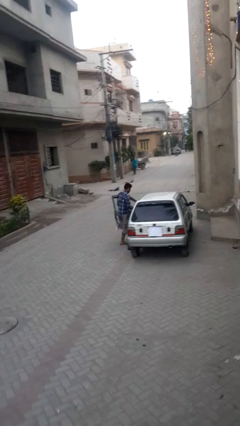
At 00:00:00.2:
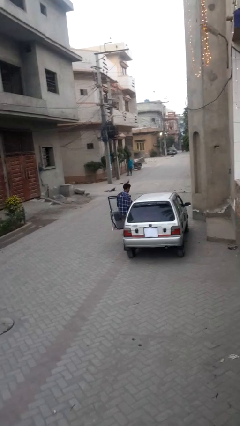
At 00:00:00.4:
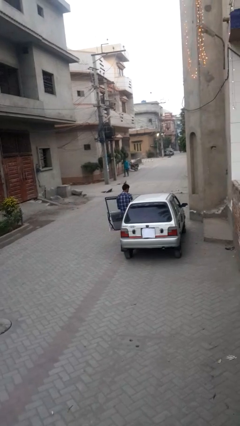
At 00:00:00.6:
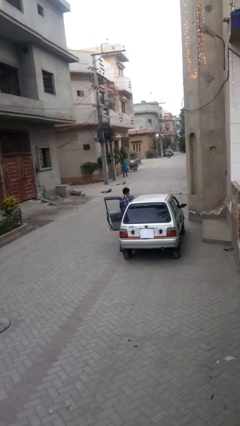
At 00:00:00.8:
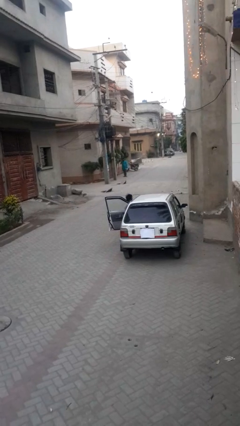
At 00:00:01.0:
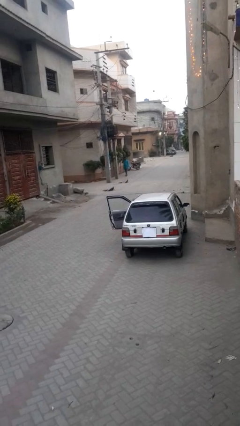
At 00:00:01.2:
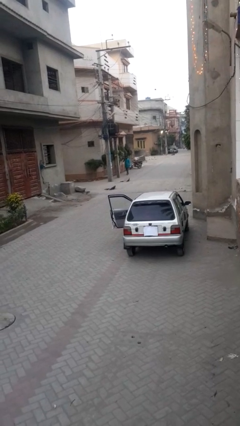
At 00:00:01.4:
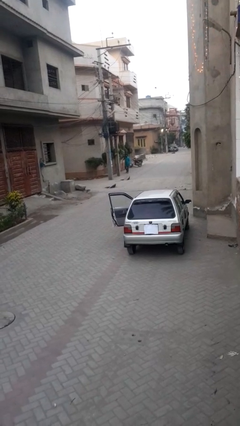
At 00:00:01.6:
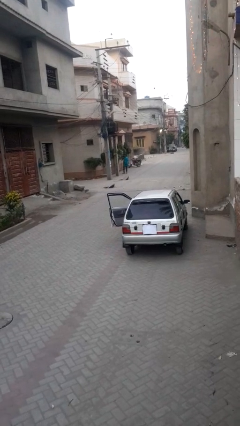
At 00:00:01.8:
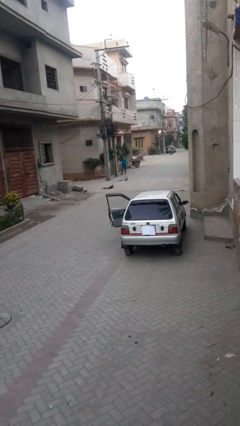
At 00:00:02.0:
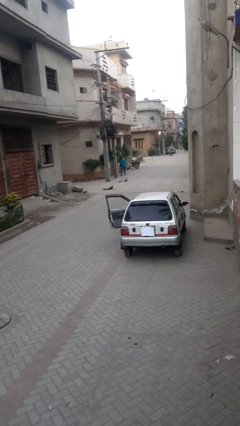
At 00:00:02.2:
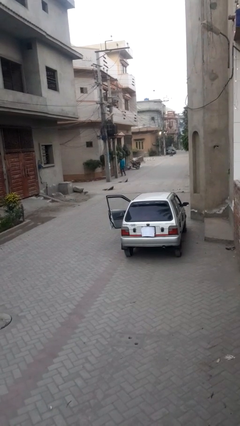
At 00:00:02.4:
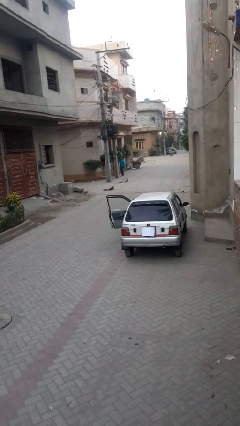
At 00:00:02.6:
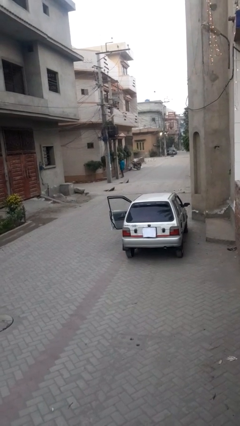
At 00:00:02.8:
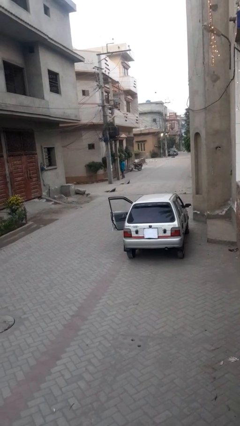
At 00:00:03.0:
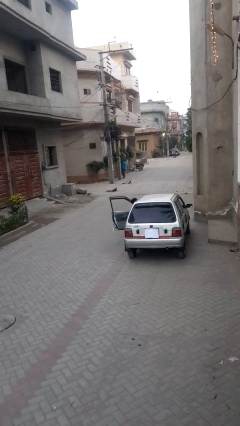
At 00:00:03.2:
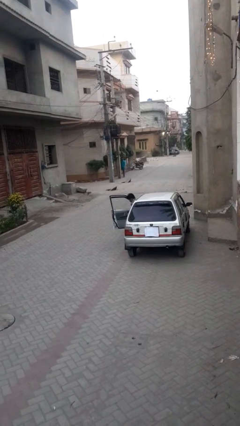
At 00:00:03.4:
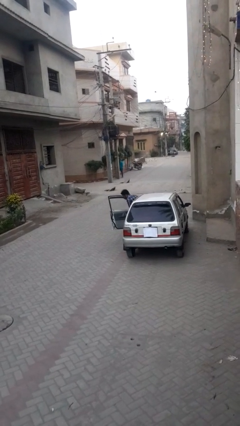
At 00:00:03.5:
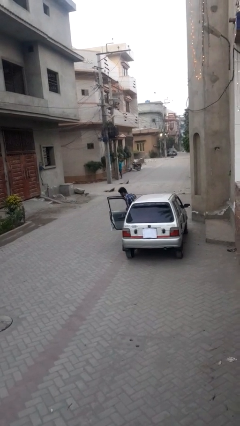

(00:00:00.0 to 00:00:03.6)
person enters car

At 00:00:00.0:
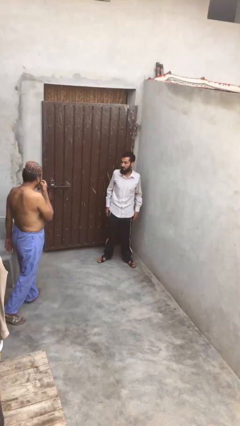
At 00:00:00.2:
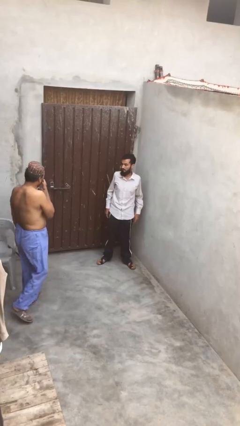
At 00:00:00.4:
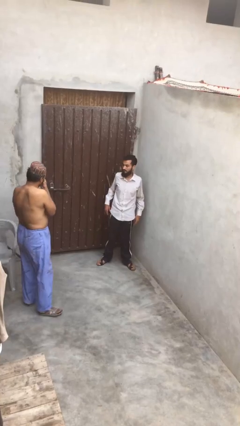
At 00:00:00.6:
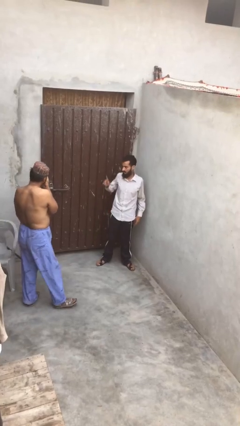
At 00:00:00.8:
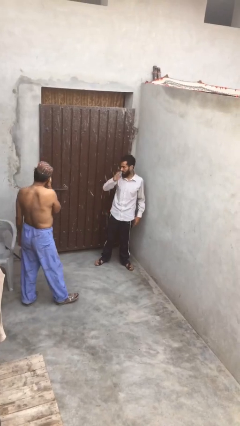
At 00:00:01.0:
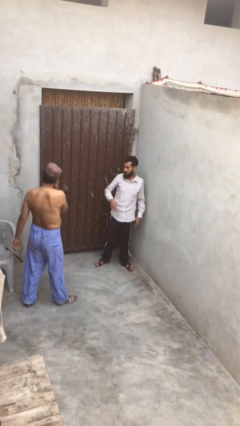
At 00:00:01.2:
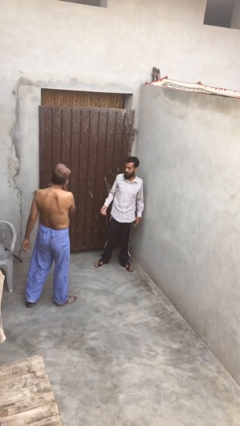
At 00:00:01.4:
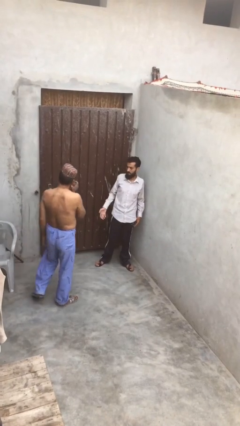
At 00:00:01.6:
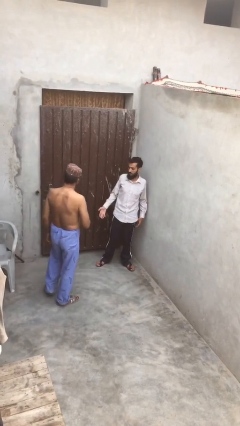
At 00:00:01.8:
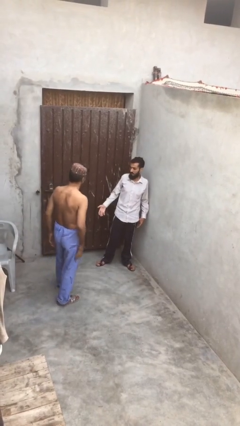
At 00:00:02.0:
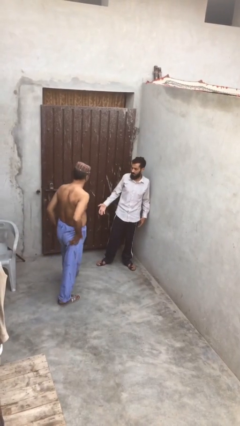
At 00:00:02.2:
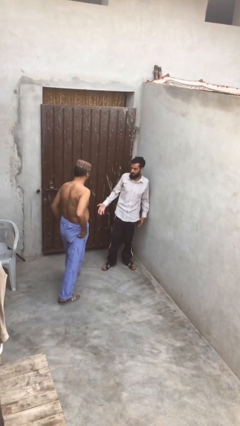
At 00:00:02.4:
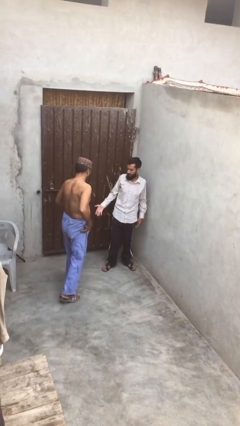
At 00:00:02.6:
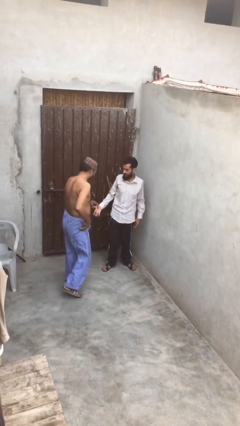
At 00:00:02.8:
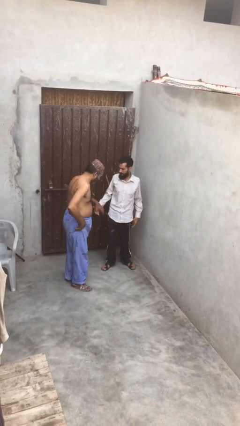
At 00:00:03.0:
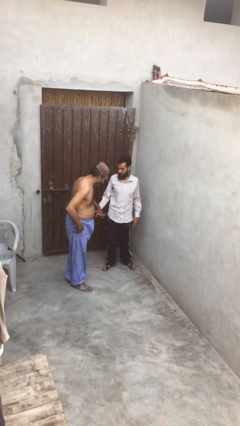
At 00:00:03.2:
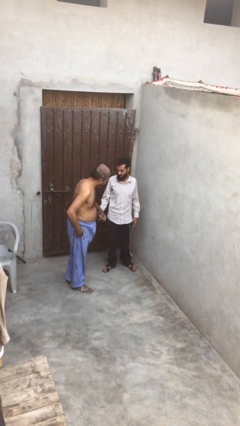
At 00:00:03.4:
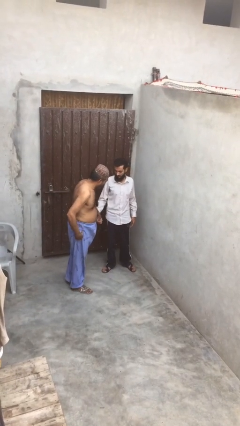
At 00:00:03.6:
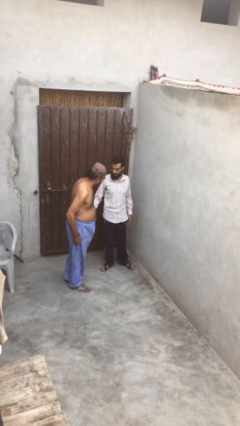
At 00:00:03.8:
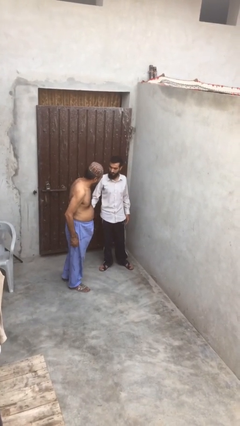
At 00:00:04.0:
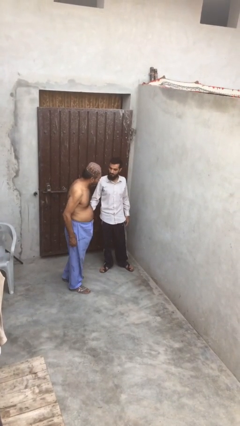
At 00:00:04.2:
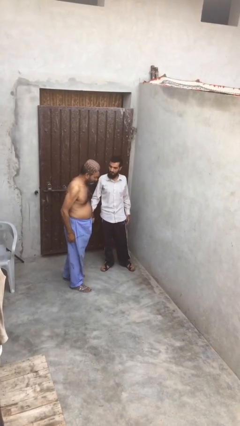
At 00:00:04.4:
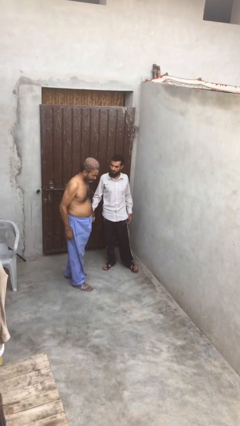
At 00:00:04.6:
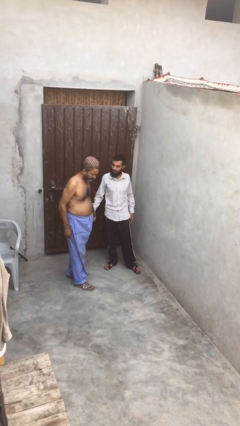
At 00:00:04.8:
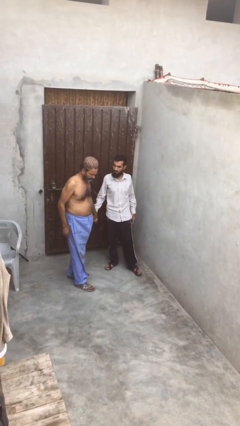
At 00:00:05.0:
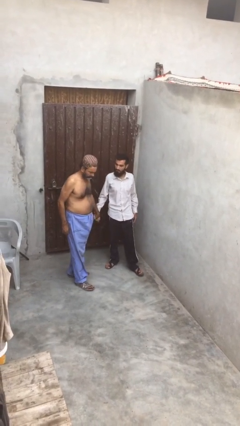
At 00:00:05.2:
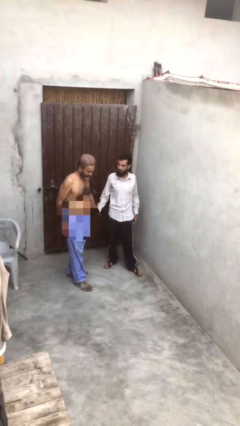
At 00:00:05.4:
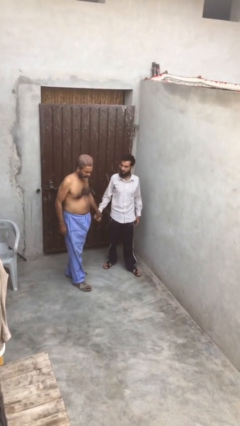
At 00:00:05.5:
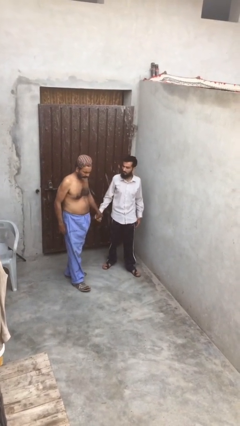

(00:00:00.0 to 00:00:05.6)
person holds hand

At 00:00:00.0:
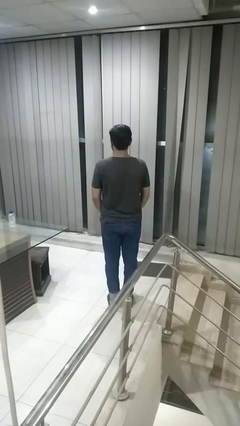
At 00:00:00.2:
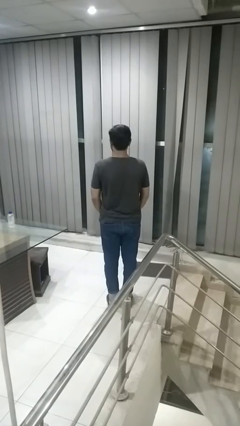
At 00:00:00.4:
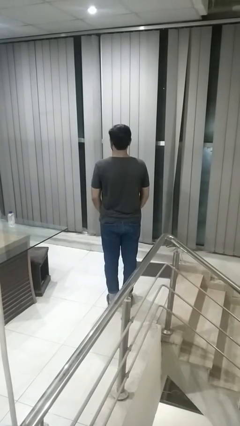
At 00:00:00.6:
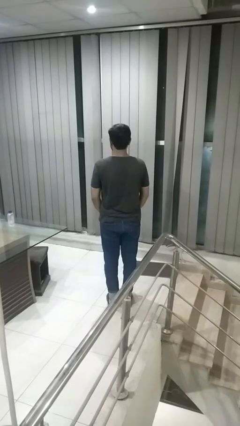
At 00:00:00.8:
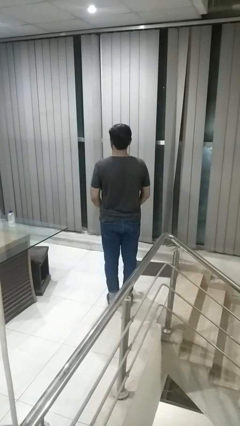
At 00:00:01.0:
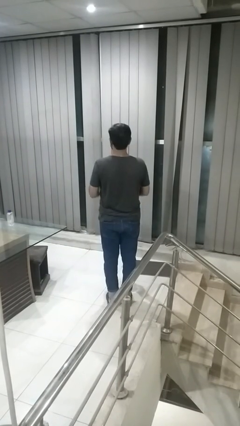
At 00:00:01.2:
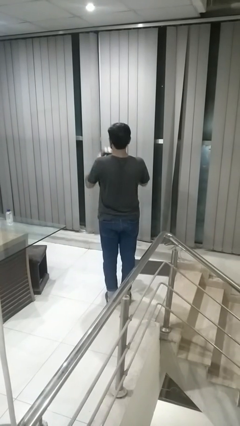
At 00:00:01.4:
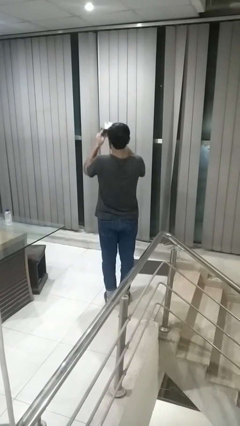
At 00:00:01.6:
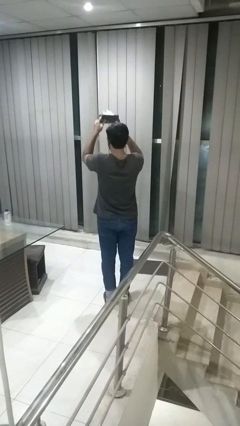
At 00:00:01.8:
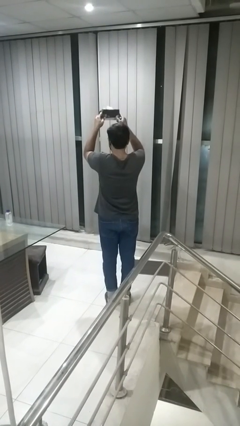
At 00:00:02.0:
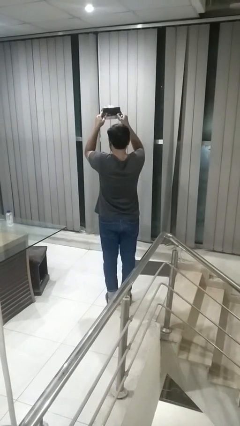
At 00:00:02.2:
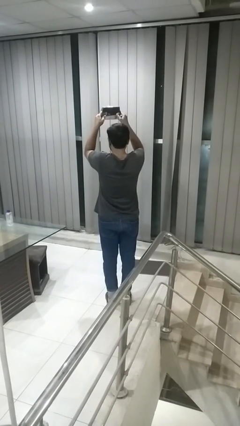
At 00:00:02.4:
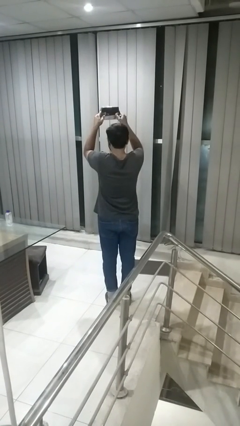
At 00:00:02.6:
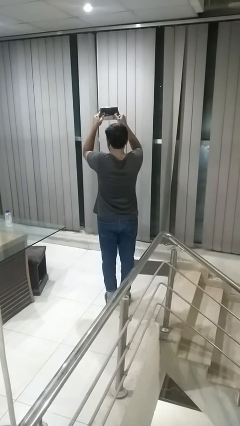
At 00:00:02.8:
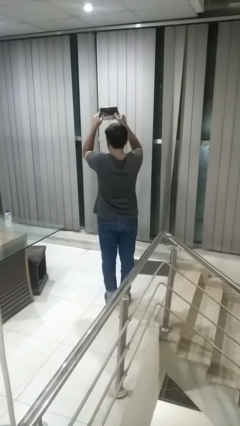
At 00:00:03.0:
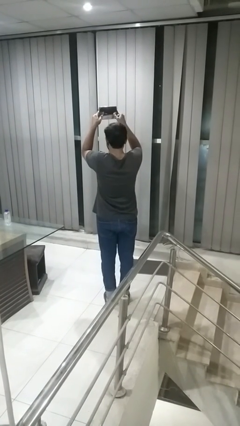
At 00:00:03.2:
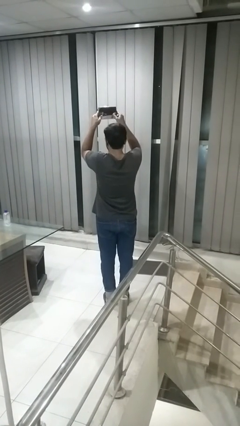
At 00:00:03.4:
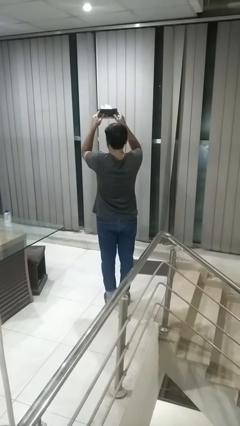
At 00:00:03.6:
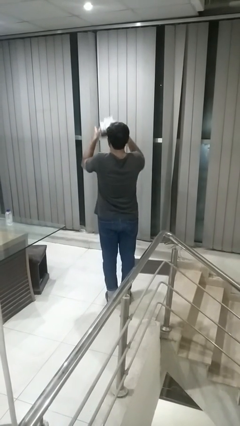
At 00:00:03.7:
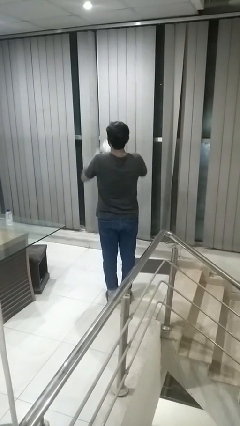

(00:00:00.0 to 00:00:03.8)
person holds object above head

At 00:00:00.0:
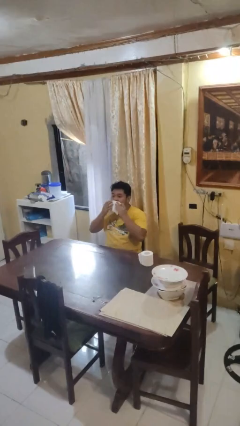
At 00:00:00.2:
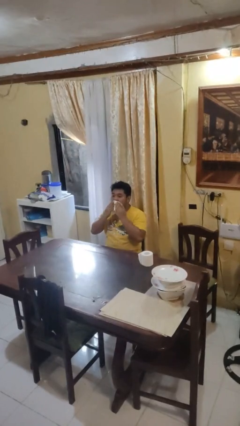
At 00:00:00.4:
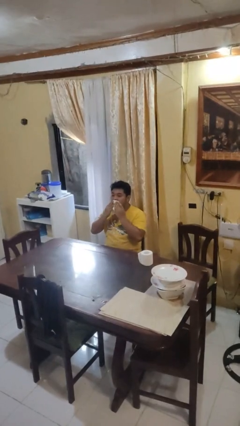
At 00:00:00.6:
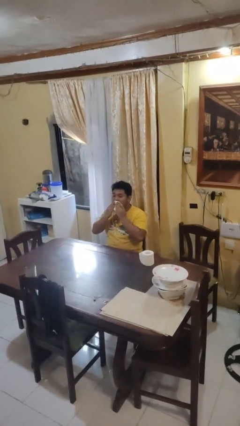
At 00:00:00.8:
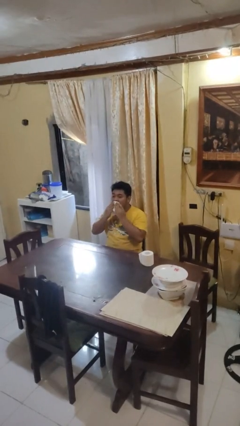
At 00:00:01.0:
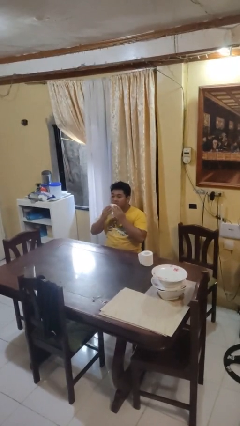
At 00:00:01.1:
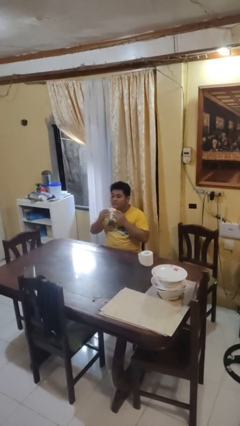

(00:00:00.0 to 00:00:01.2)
person wipes mouth with napkin

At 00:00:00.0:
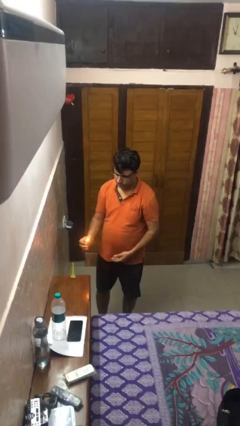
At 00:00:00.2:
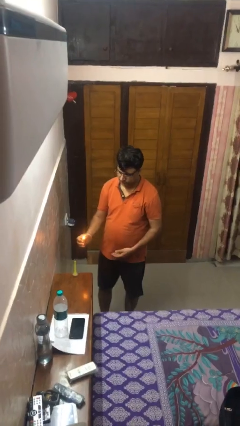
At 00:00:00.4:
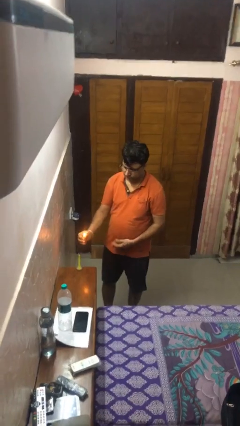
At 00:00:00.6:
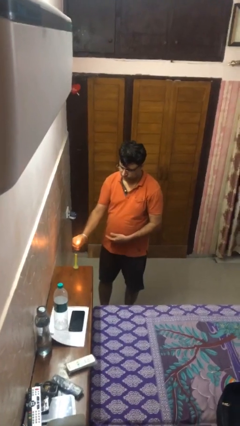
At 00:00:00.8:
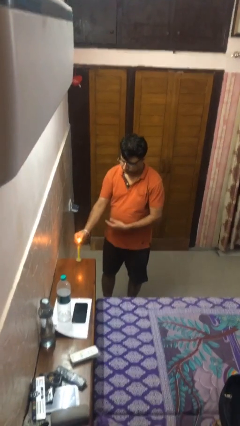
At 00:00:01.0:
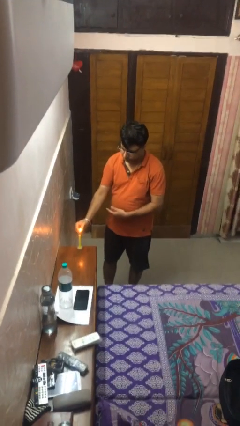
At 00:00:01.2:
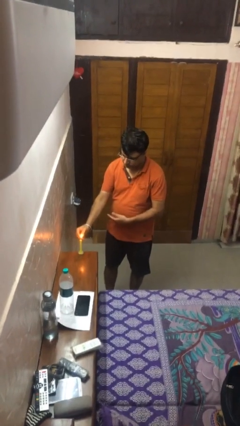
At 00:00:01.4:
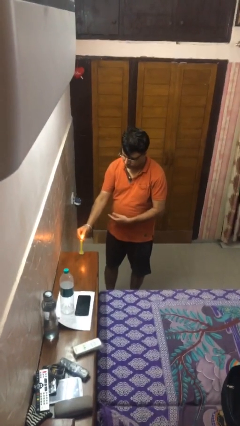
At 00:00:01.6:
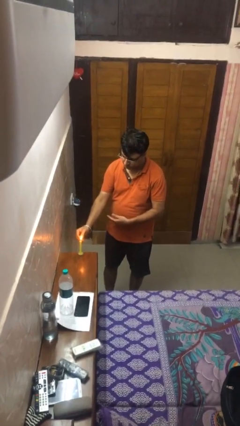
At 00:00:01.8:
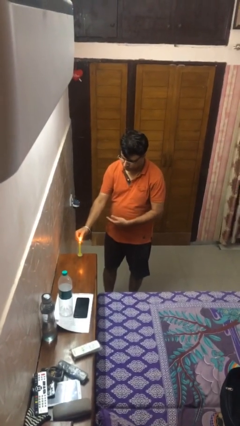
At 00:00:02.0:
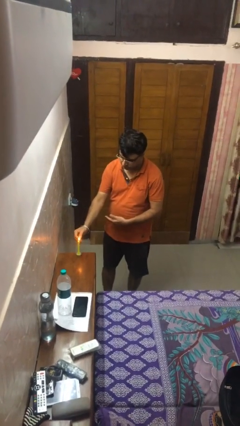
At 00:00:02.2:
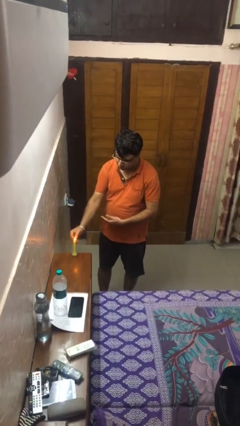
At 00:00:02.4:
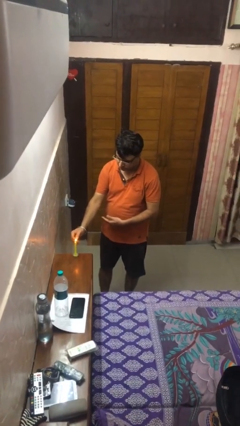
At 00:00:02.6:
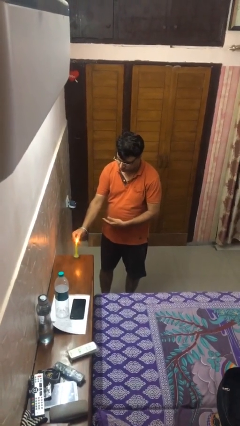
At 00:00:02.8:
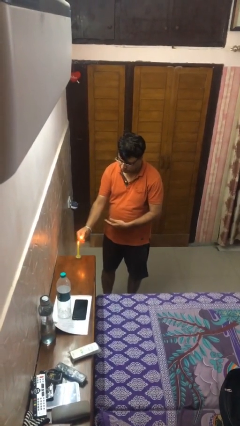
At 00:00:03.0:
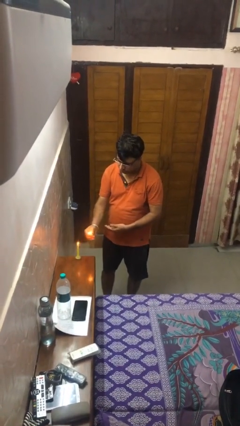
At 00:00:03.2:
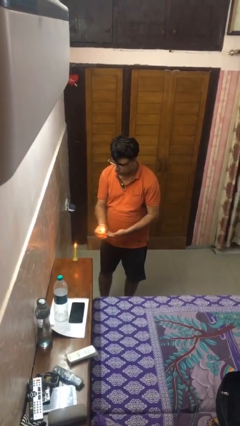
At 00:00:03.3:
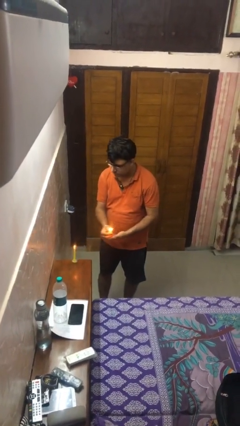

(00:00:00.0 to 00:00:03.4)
person lights candle
